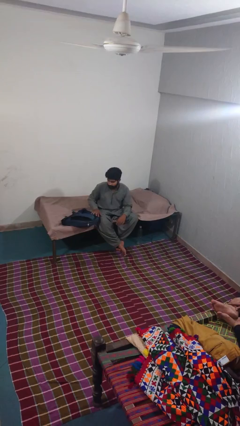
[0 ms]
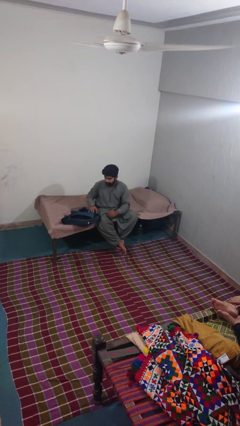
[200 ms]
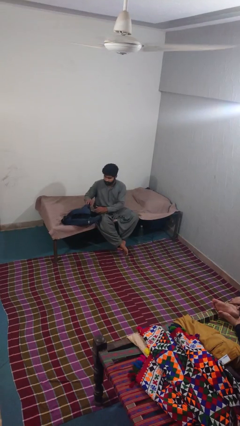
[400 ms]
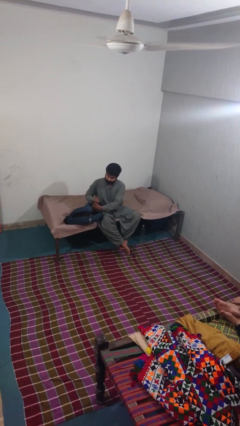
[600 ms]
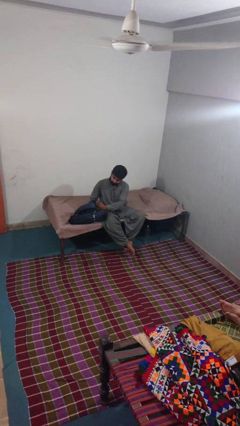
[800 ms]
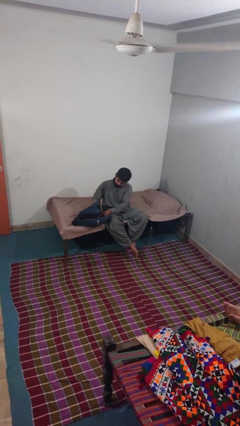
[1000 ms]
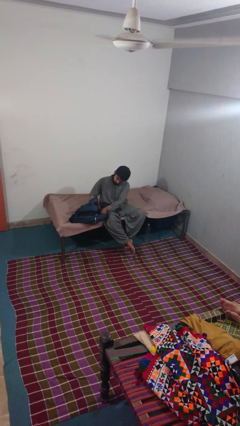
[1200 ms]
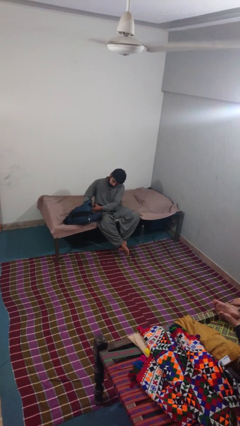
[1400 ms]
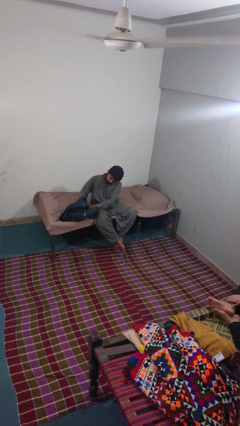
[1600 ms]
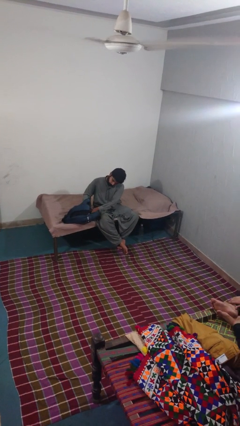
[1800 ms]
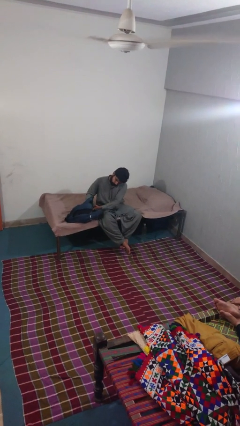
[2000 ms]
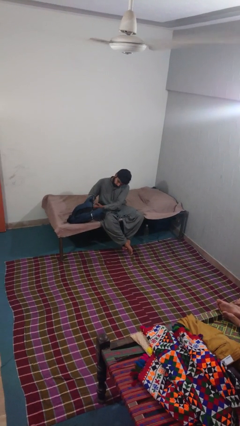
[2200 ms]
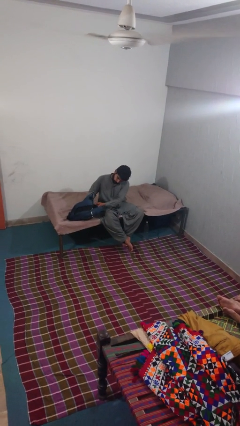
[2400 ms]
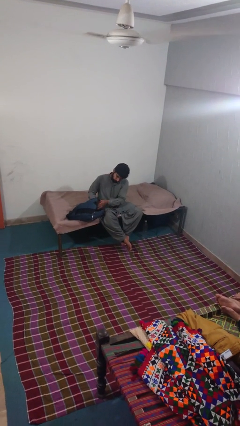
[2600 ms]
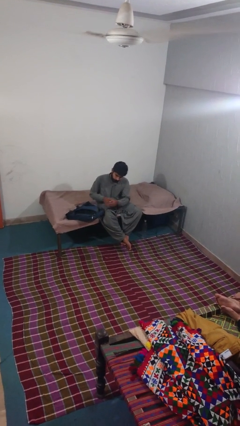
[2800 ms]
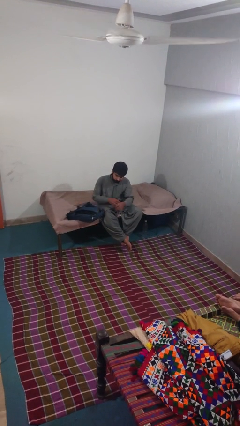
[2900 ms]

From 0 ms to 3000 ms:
person searches in bag

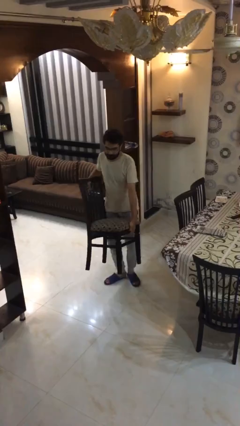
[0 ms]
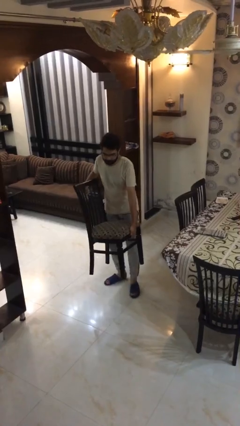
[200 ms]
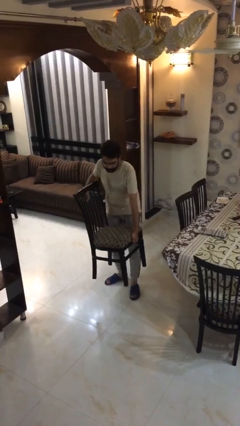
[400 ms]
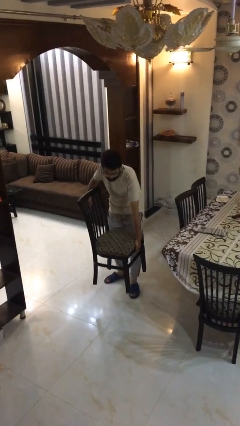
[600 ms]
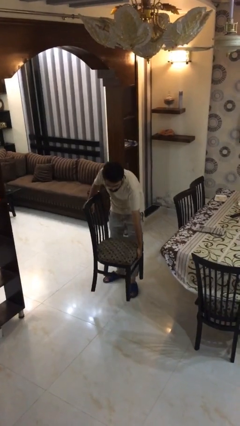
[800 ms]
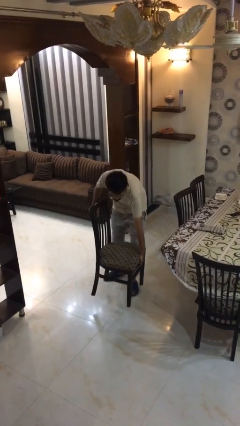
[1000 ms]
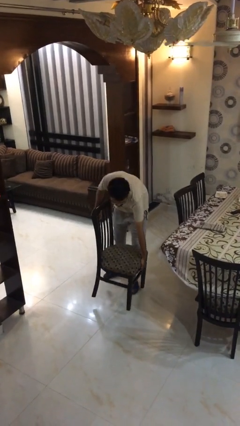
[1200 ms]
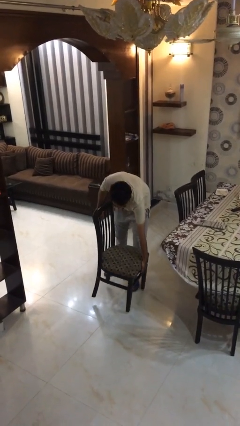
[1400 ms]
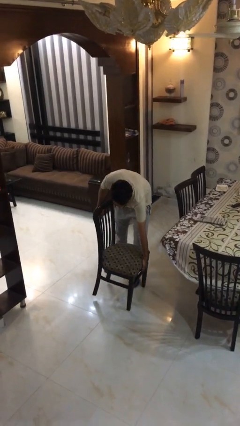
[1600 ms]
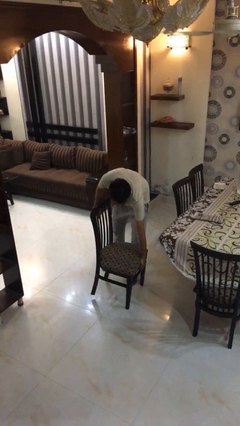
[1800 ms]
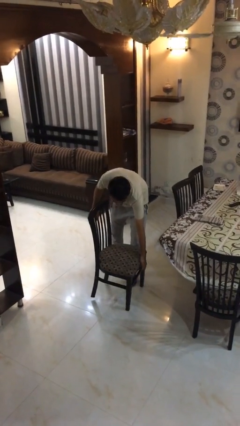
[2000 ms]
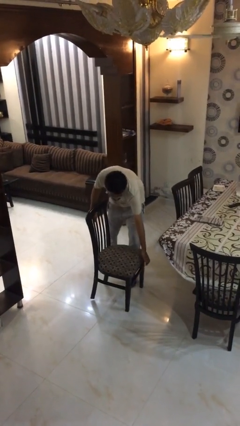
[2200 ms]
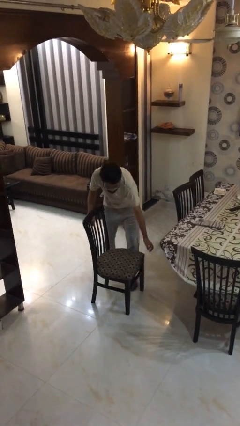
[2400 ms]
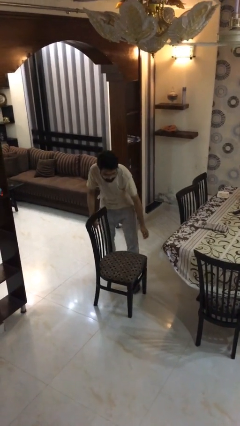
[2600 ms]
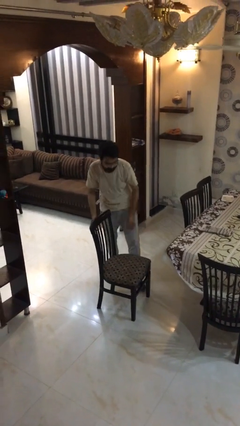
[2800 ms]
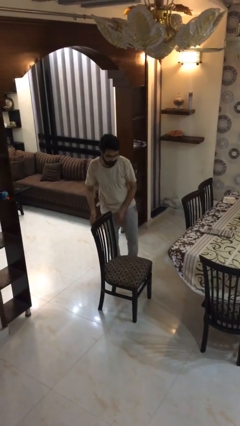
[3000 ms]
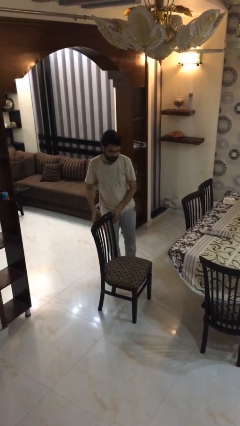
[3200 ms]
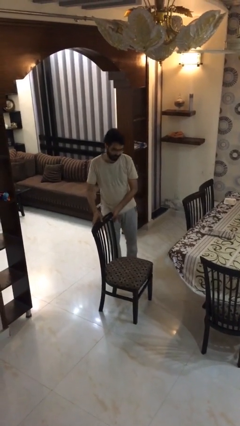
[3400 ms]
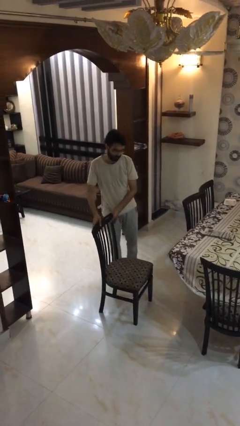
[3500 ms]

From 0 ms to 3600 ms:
person puts down object on floor

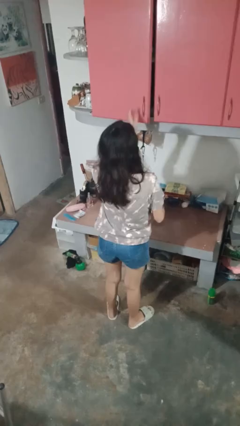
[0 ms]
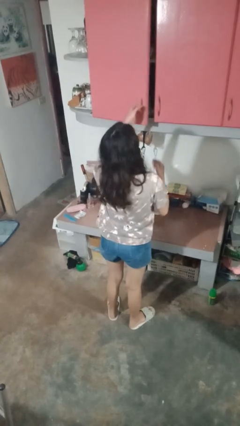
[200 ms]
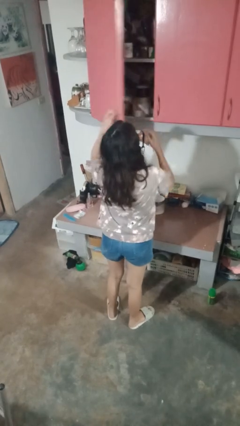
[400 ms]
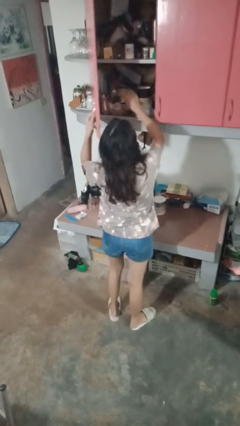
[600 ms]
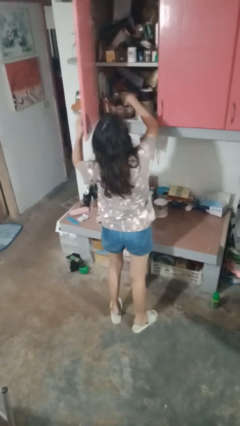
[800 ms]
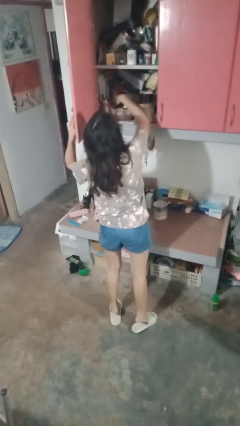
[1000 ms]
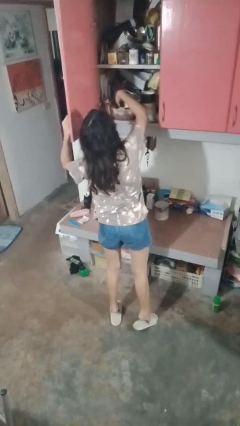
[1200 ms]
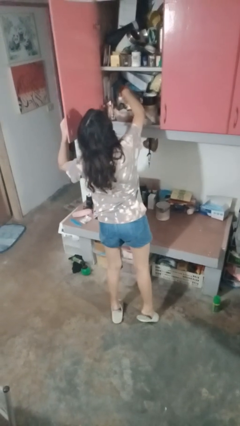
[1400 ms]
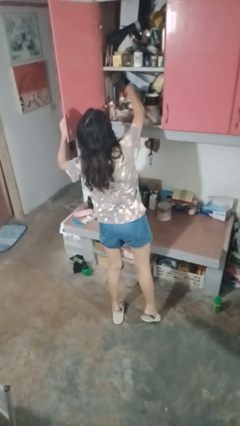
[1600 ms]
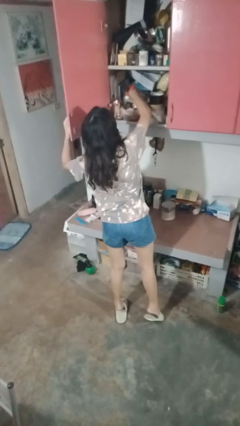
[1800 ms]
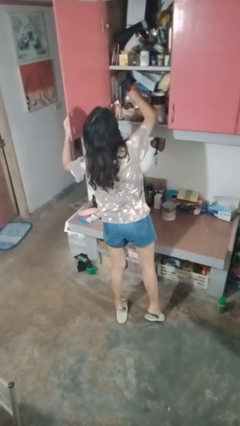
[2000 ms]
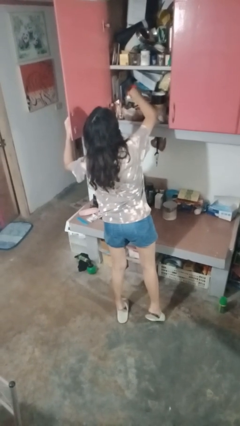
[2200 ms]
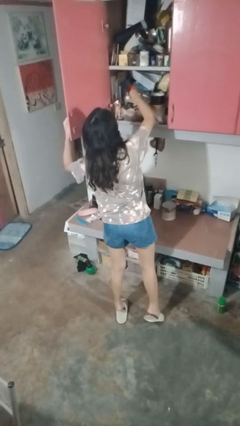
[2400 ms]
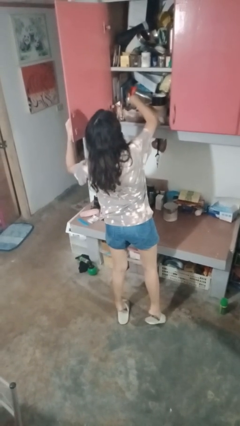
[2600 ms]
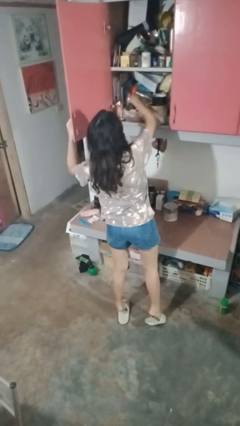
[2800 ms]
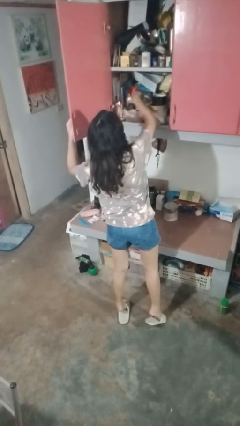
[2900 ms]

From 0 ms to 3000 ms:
person searches in cabinet

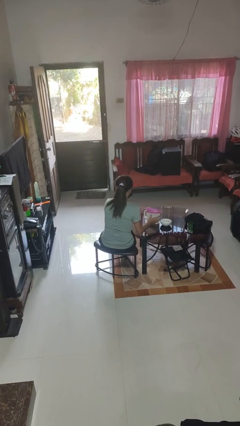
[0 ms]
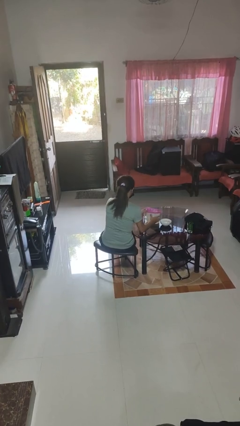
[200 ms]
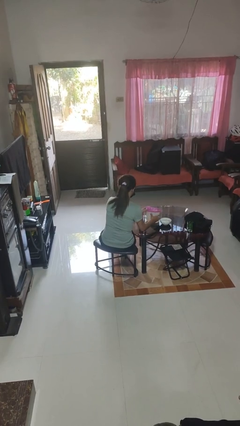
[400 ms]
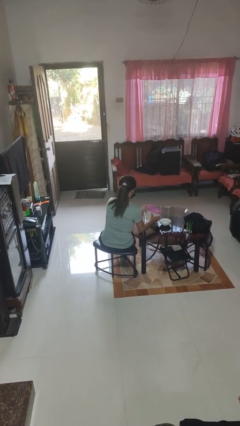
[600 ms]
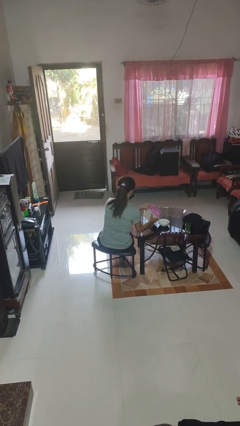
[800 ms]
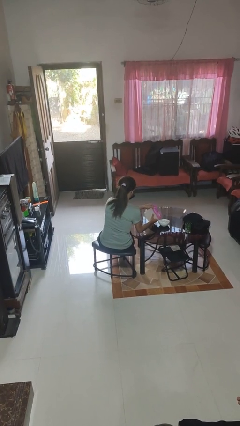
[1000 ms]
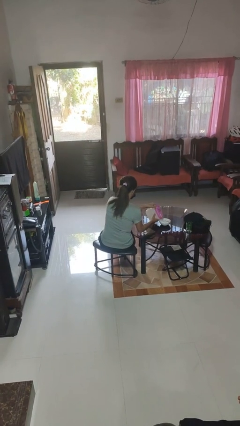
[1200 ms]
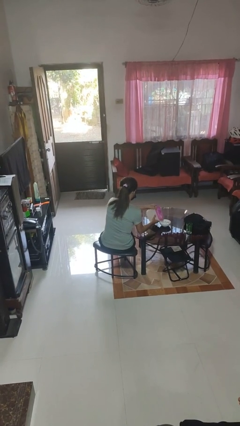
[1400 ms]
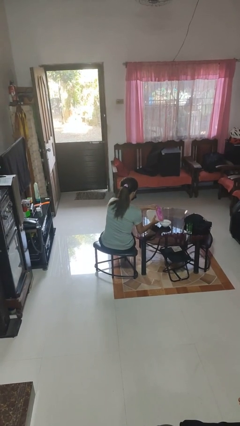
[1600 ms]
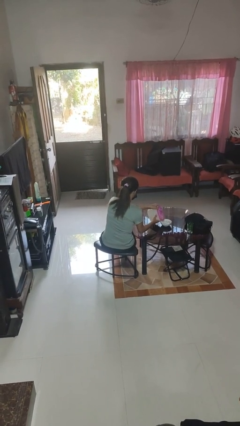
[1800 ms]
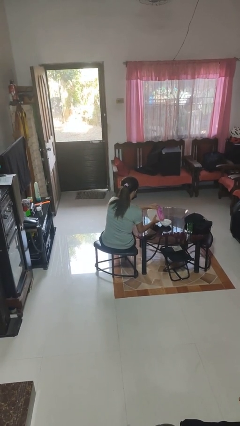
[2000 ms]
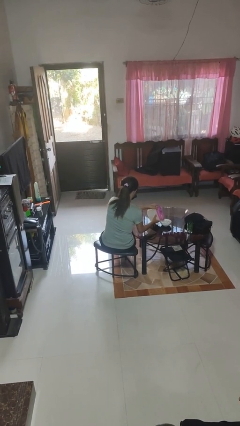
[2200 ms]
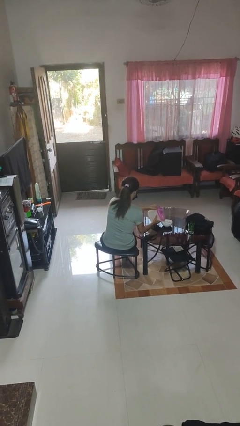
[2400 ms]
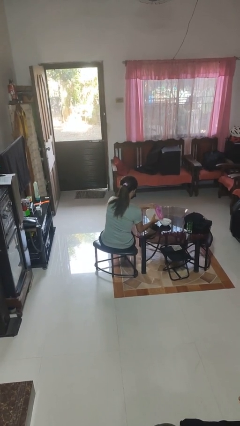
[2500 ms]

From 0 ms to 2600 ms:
person pours into bowl

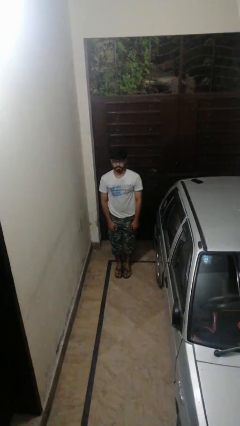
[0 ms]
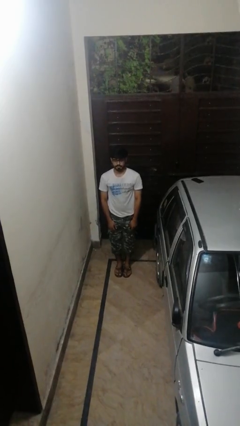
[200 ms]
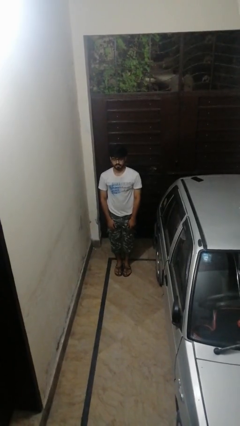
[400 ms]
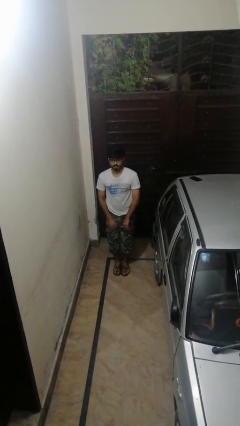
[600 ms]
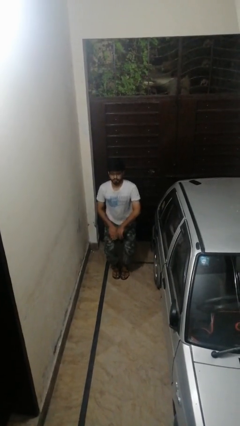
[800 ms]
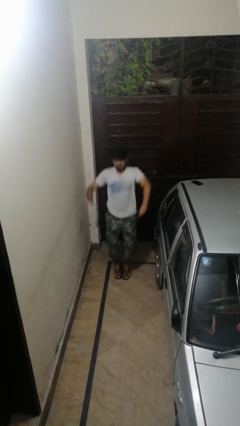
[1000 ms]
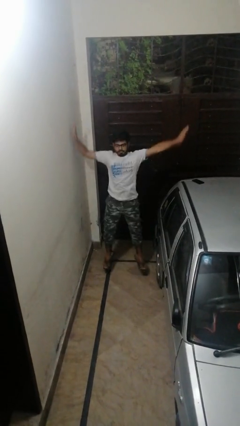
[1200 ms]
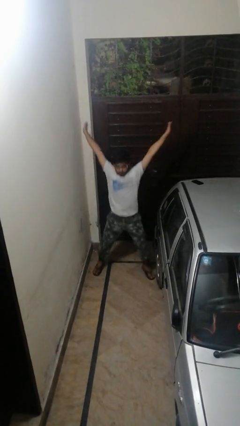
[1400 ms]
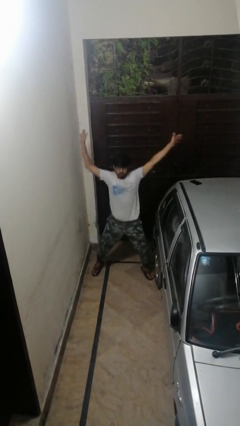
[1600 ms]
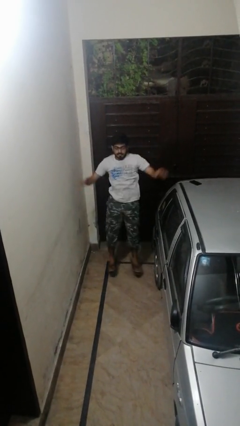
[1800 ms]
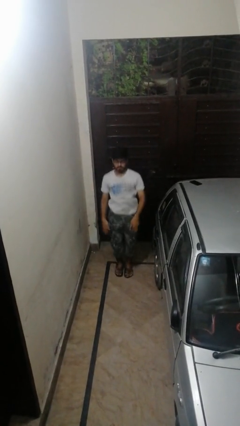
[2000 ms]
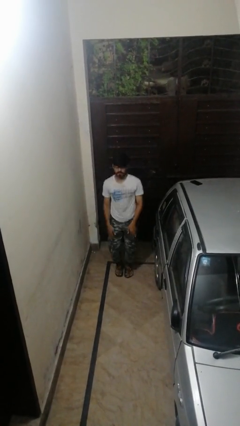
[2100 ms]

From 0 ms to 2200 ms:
person exercises with jumping jacks

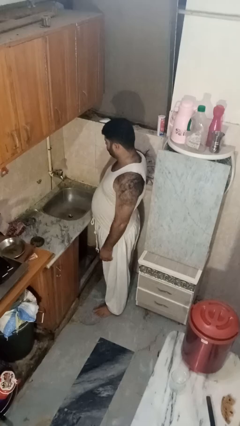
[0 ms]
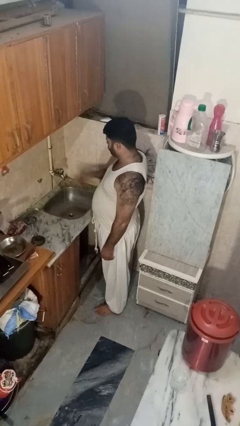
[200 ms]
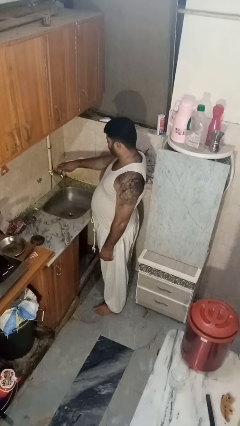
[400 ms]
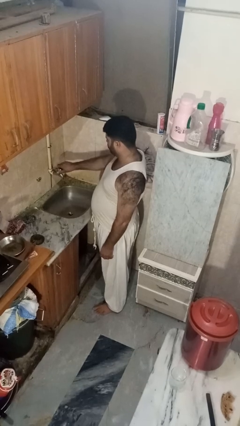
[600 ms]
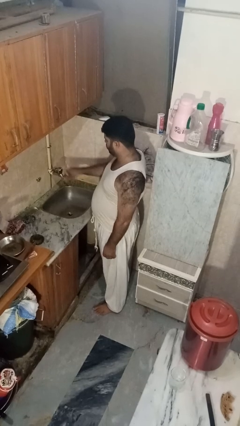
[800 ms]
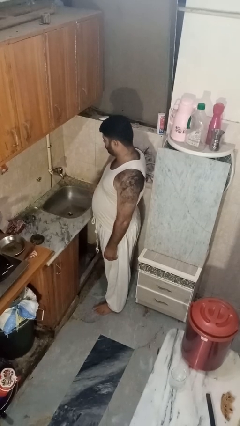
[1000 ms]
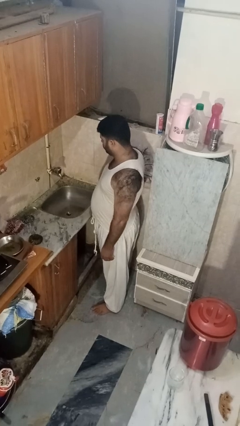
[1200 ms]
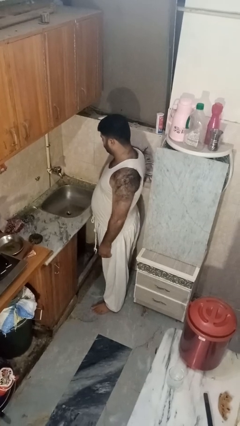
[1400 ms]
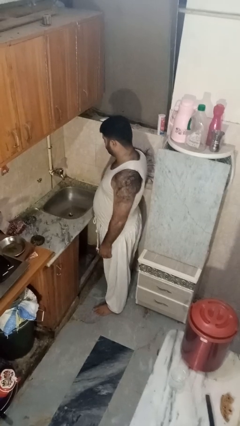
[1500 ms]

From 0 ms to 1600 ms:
person turns off faucet

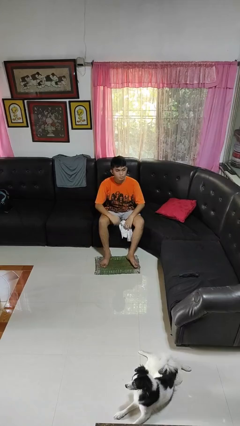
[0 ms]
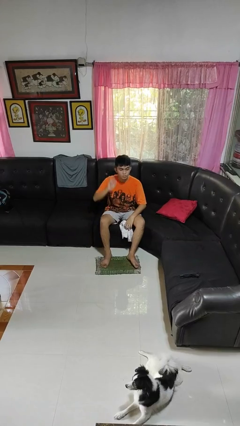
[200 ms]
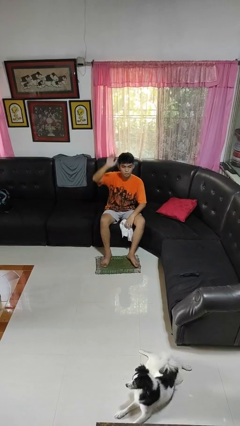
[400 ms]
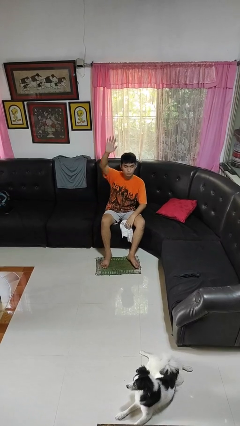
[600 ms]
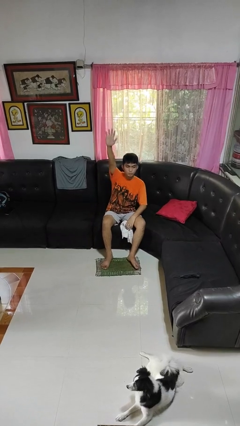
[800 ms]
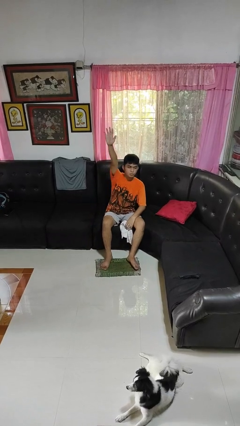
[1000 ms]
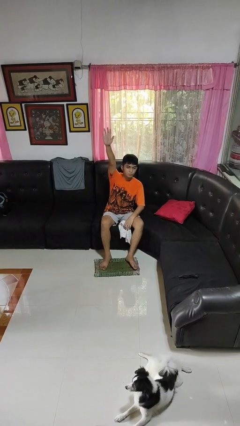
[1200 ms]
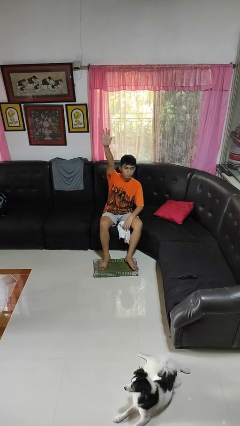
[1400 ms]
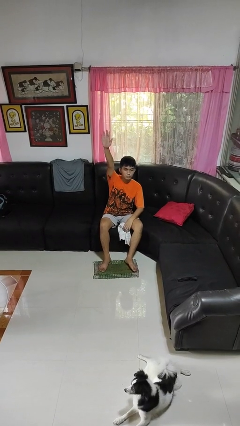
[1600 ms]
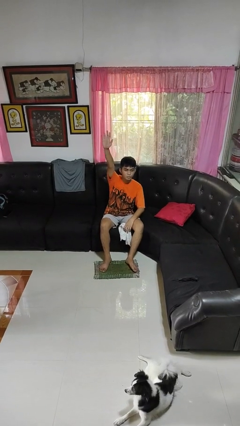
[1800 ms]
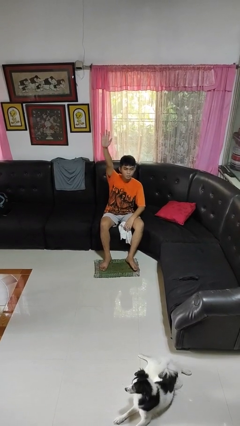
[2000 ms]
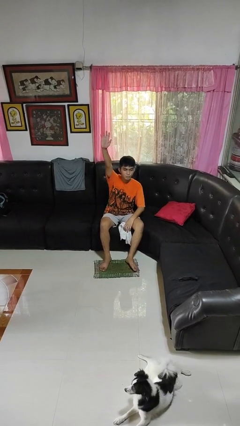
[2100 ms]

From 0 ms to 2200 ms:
person gestures raise hand
